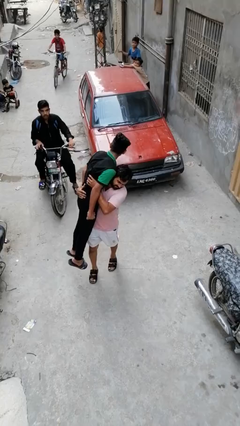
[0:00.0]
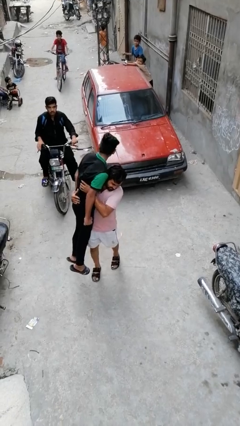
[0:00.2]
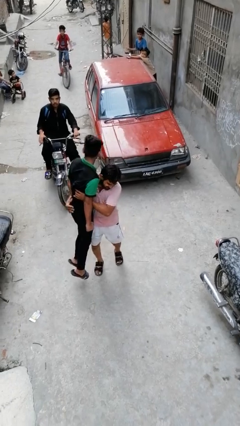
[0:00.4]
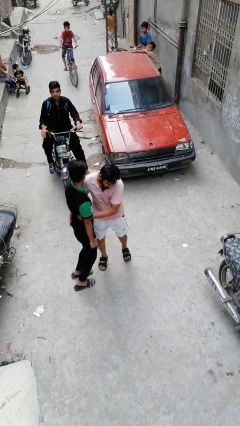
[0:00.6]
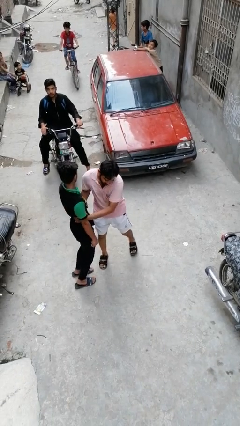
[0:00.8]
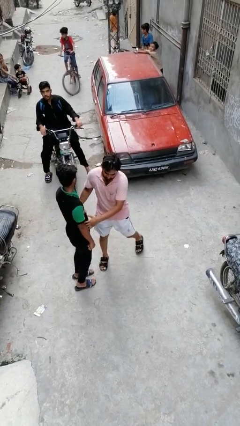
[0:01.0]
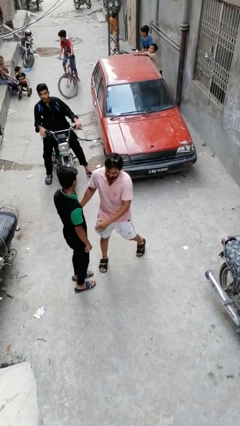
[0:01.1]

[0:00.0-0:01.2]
person puts down person

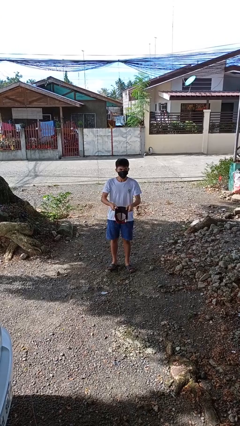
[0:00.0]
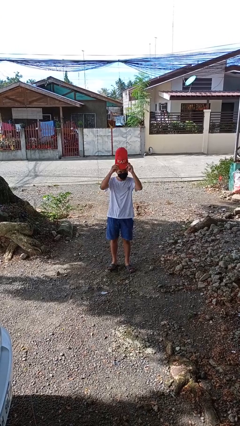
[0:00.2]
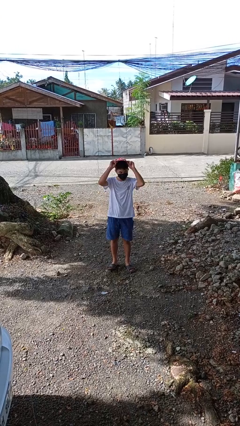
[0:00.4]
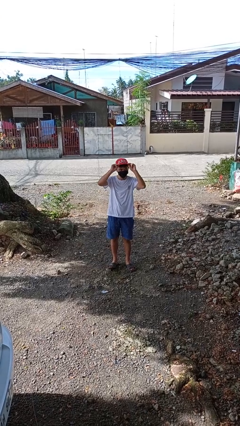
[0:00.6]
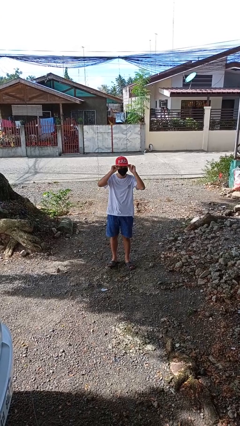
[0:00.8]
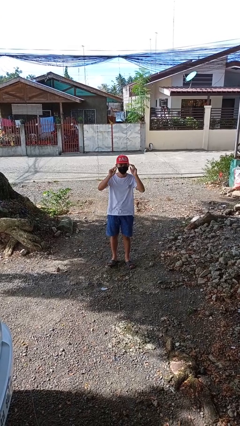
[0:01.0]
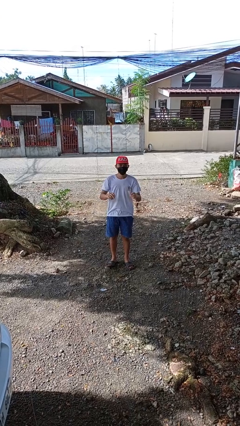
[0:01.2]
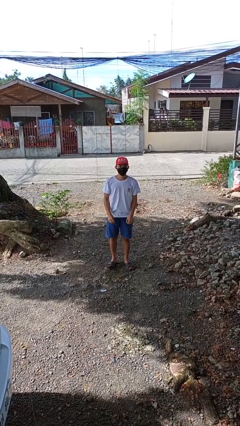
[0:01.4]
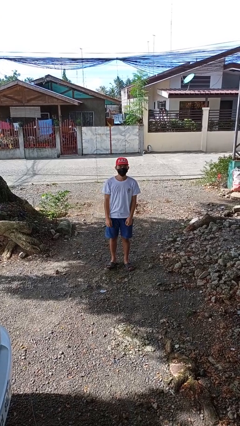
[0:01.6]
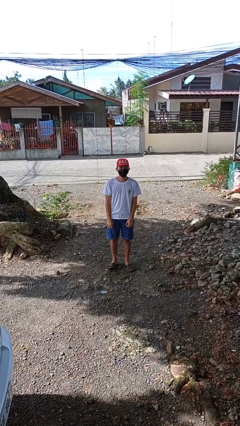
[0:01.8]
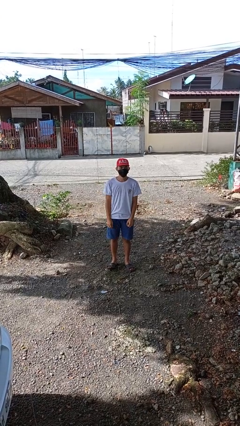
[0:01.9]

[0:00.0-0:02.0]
person puts on hat

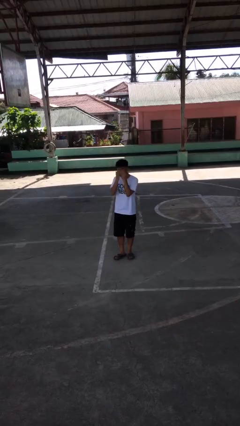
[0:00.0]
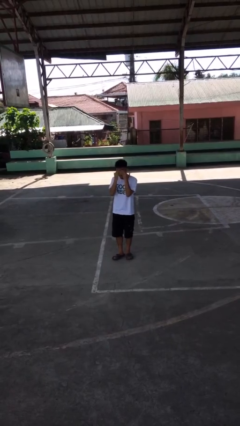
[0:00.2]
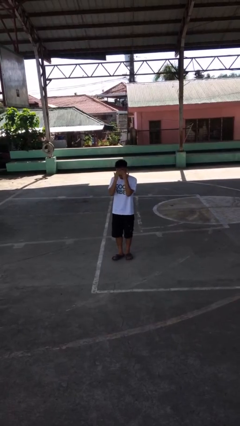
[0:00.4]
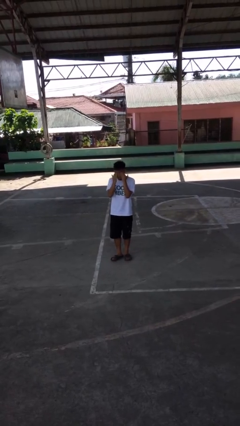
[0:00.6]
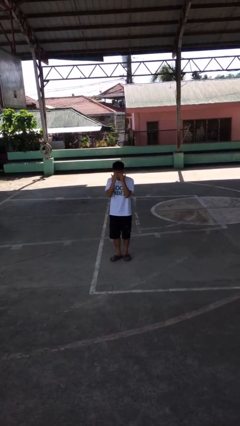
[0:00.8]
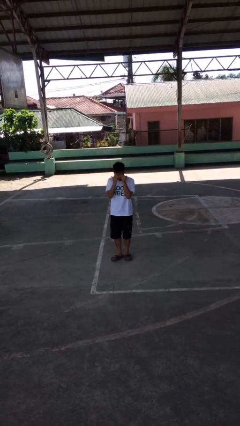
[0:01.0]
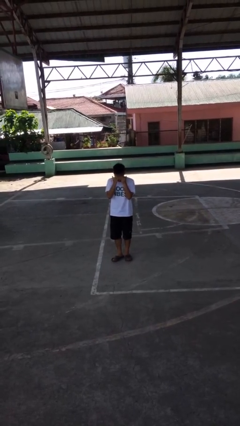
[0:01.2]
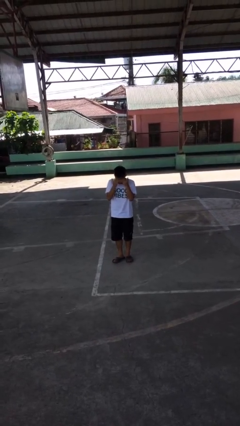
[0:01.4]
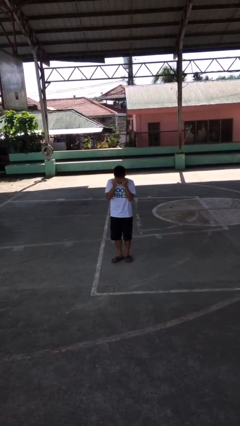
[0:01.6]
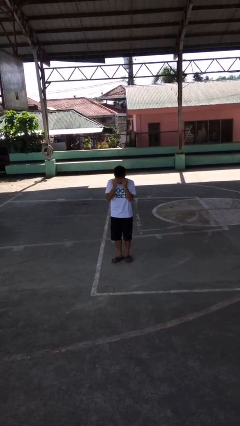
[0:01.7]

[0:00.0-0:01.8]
person rubs eyes

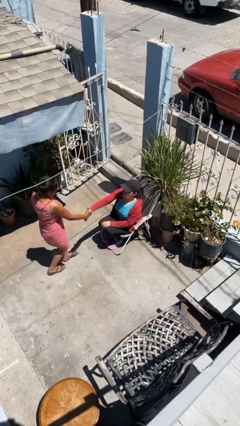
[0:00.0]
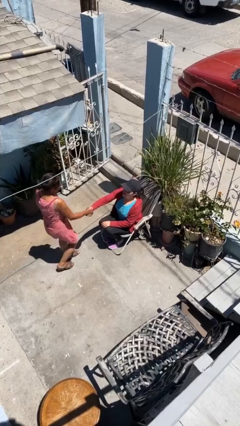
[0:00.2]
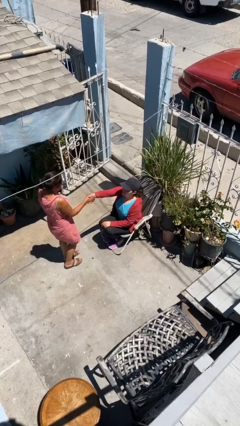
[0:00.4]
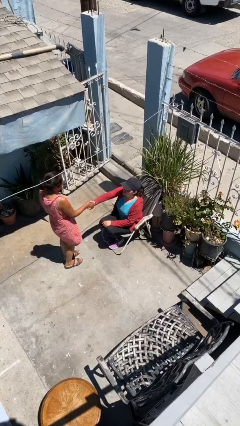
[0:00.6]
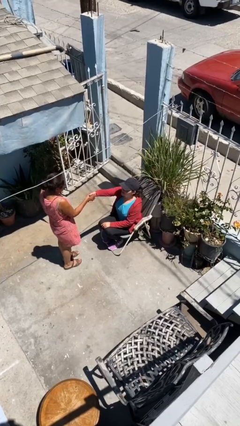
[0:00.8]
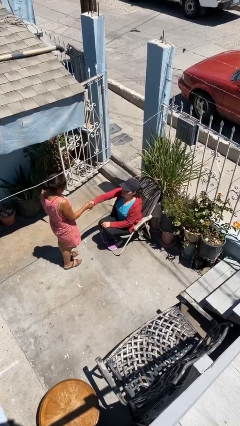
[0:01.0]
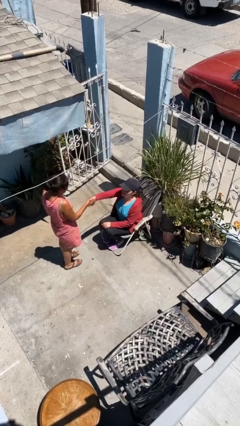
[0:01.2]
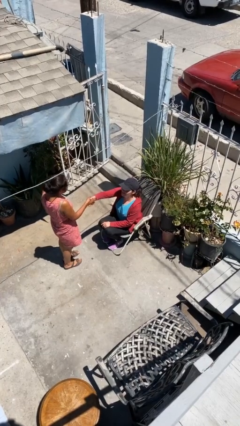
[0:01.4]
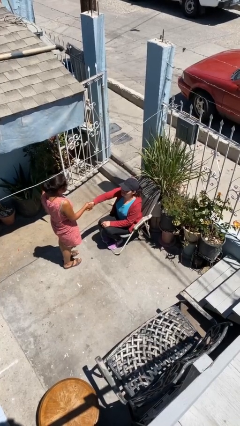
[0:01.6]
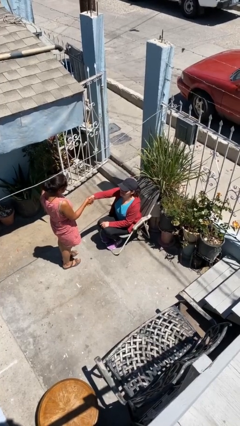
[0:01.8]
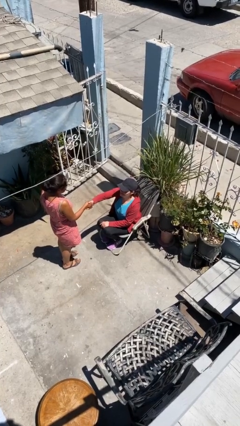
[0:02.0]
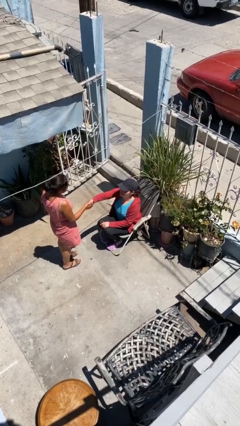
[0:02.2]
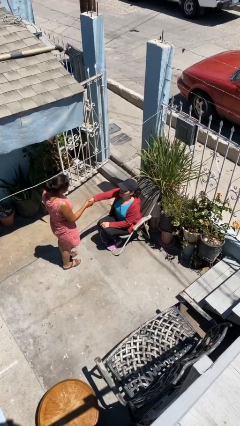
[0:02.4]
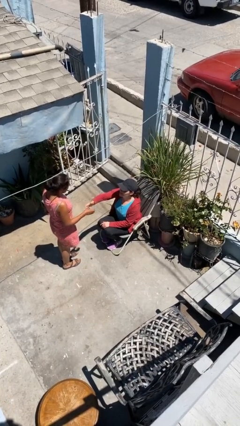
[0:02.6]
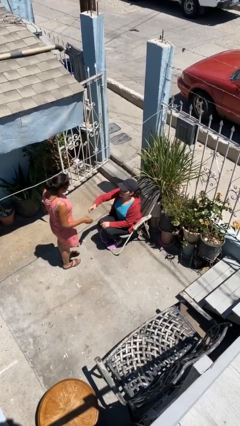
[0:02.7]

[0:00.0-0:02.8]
person shakes hand

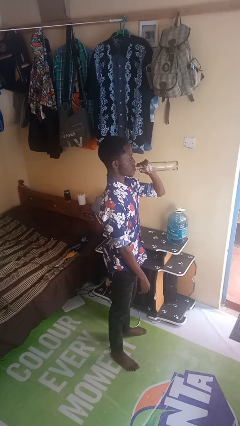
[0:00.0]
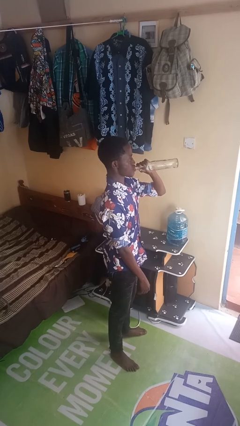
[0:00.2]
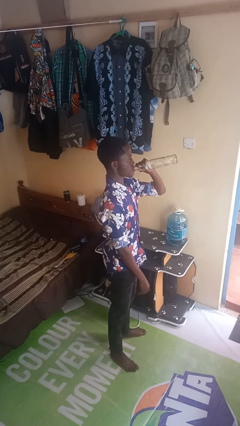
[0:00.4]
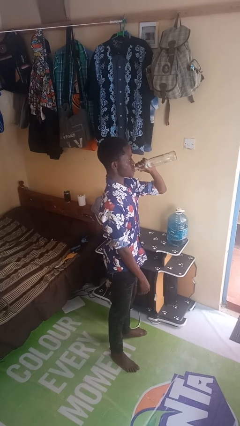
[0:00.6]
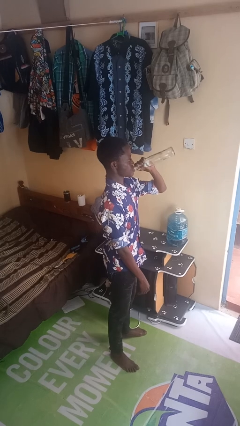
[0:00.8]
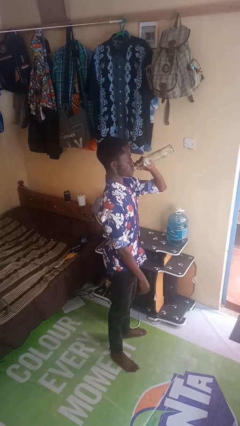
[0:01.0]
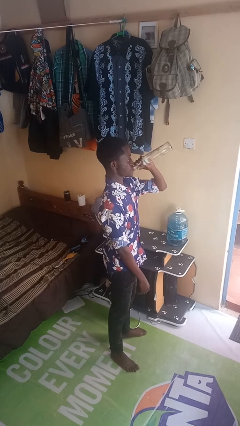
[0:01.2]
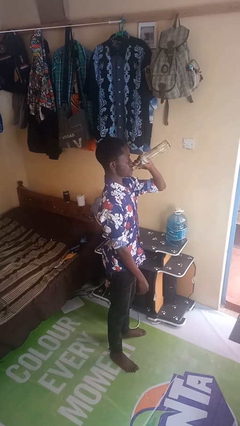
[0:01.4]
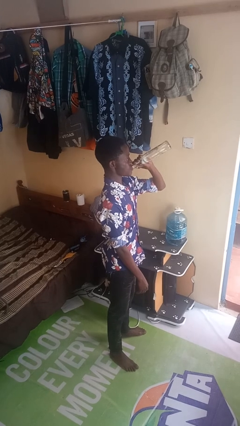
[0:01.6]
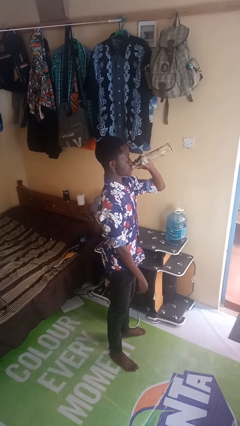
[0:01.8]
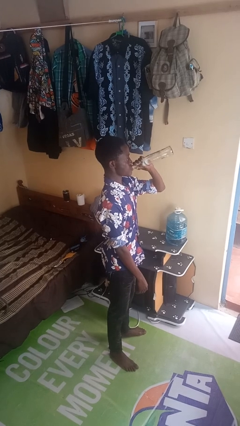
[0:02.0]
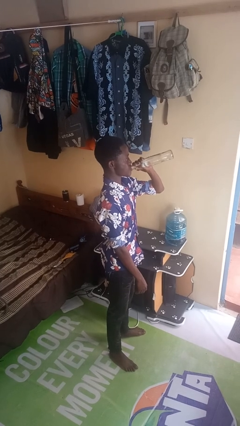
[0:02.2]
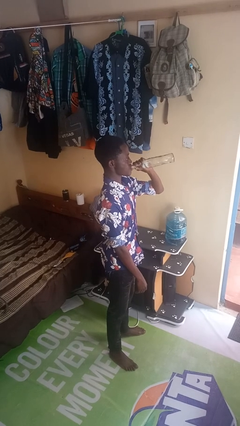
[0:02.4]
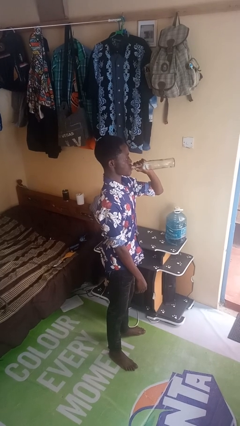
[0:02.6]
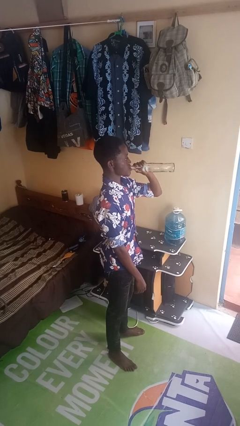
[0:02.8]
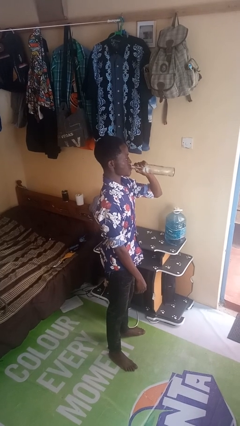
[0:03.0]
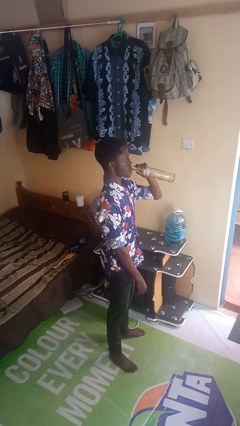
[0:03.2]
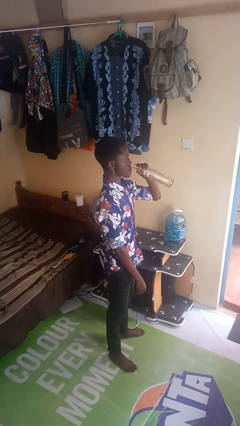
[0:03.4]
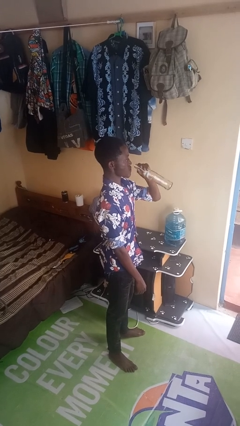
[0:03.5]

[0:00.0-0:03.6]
person drinks from bottle

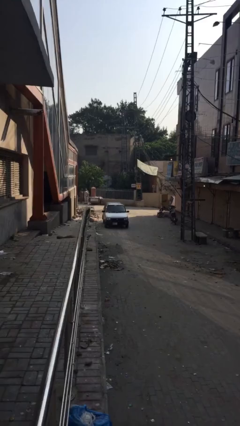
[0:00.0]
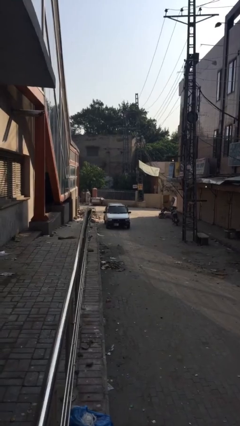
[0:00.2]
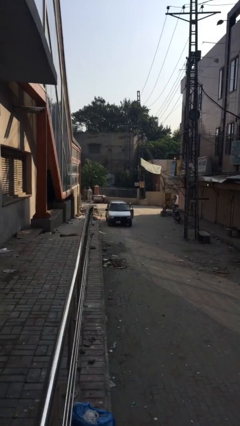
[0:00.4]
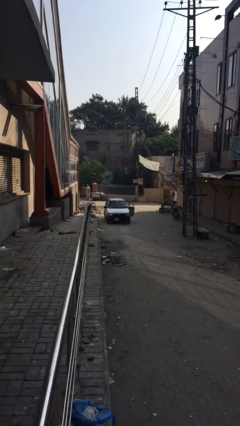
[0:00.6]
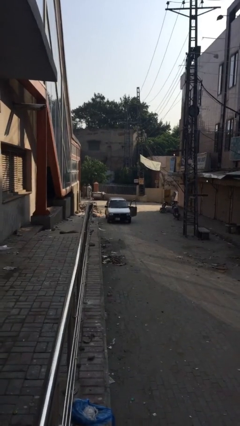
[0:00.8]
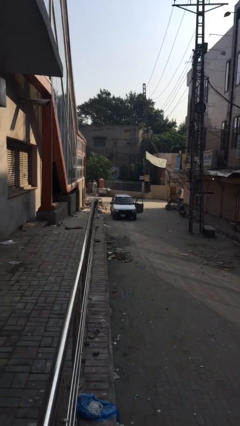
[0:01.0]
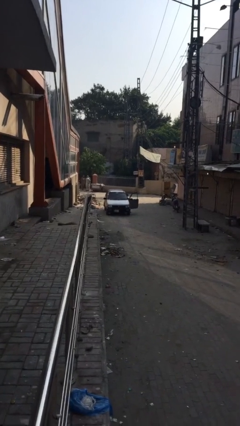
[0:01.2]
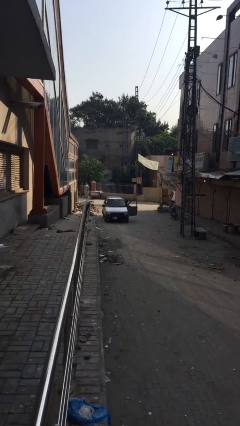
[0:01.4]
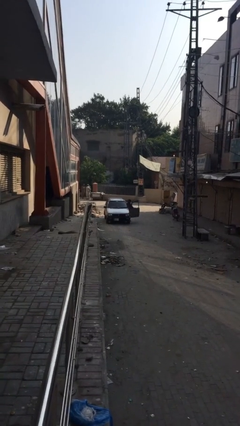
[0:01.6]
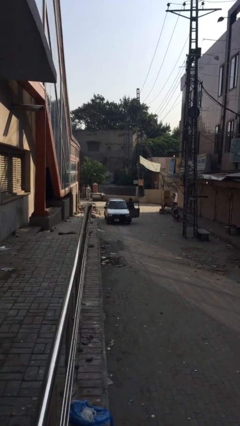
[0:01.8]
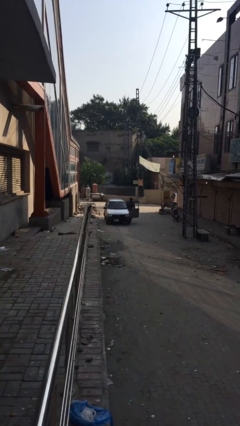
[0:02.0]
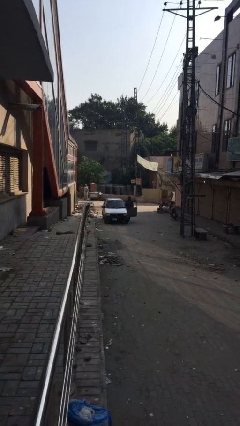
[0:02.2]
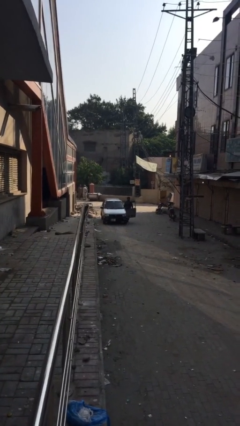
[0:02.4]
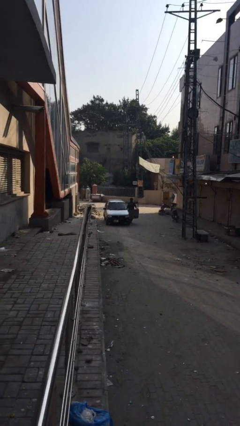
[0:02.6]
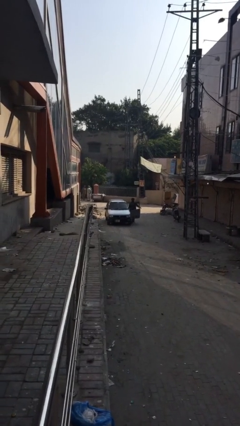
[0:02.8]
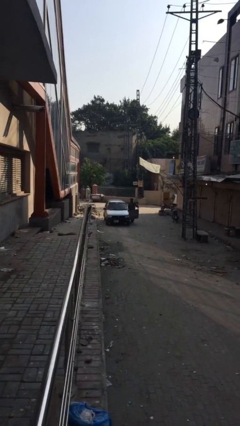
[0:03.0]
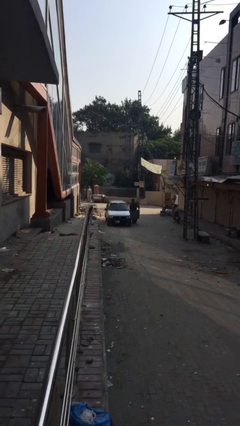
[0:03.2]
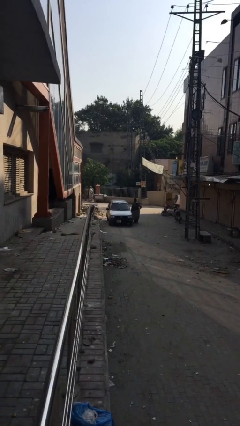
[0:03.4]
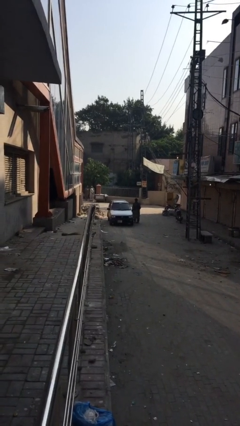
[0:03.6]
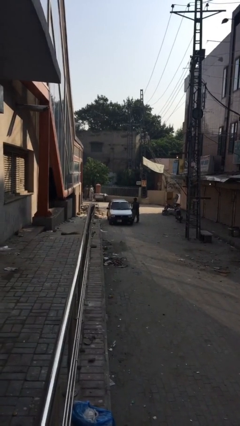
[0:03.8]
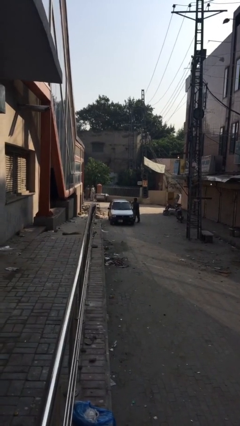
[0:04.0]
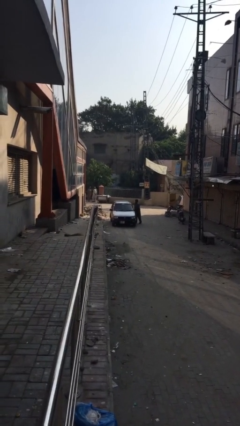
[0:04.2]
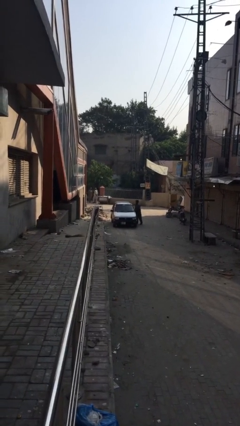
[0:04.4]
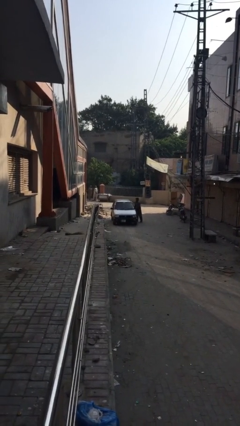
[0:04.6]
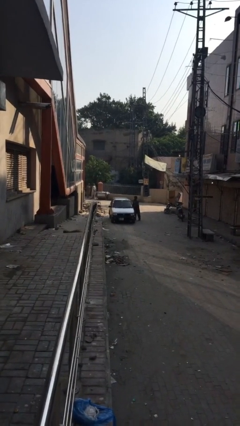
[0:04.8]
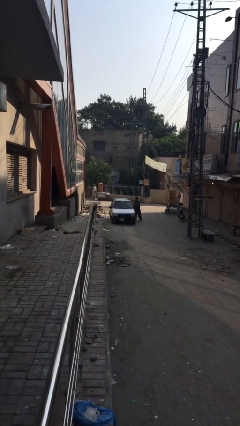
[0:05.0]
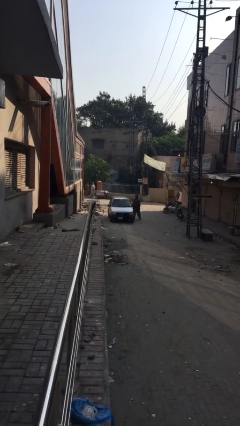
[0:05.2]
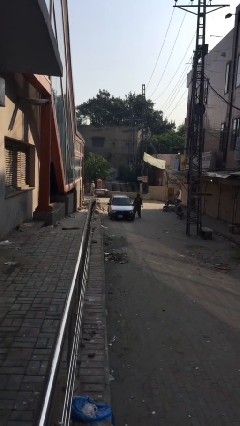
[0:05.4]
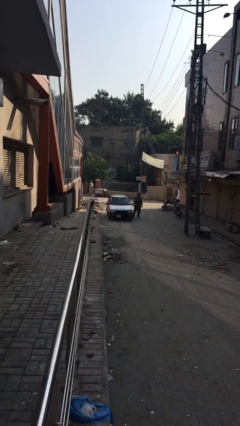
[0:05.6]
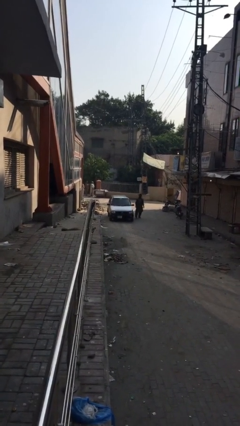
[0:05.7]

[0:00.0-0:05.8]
car drops off person
